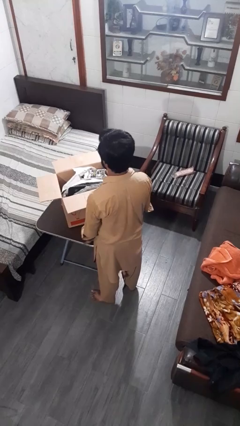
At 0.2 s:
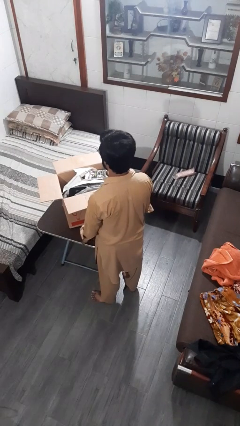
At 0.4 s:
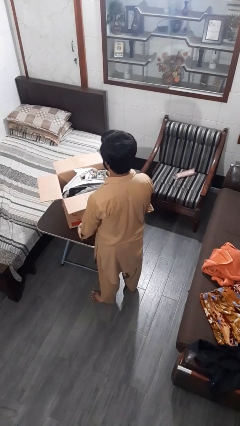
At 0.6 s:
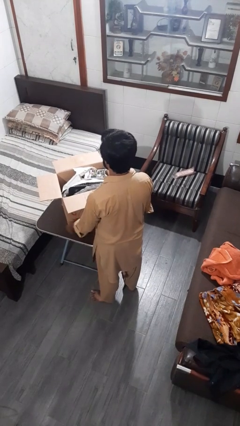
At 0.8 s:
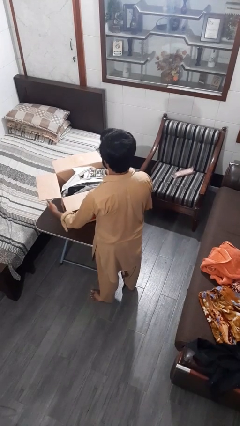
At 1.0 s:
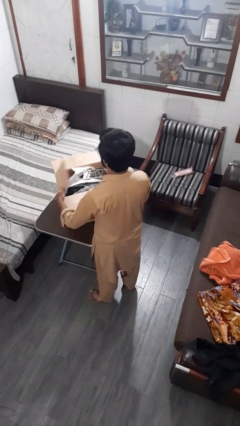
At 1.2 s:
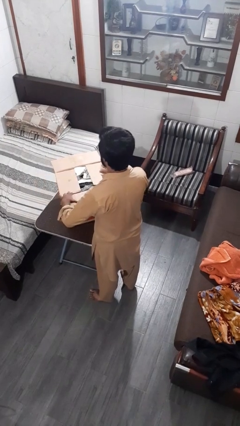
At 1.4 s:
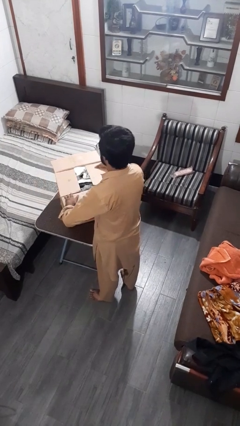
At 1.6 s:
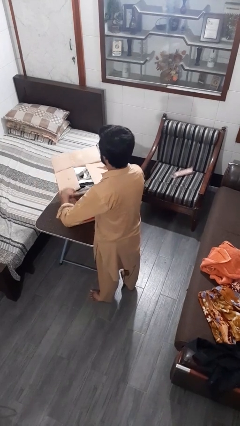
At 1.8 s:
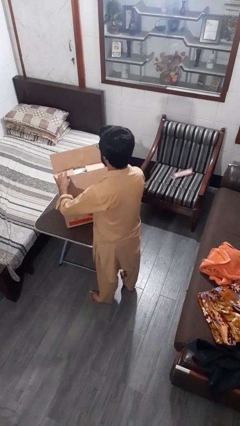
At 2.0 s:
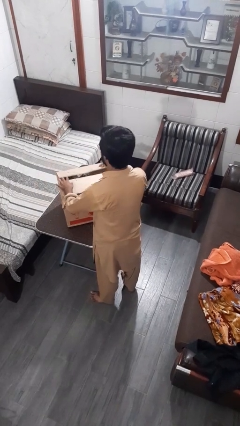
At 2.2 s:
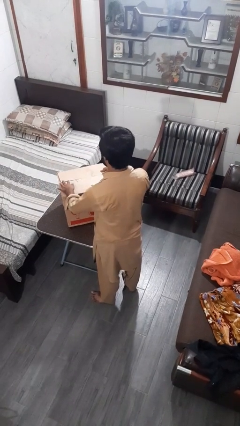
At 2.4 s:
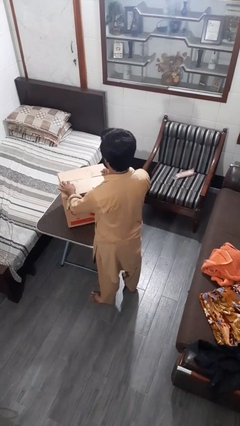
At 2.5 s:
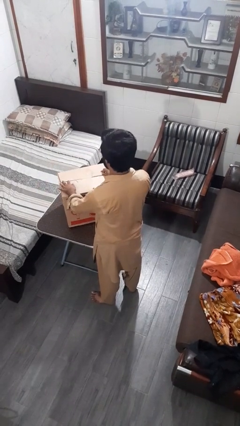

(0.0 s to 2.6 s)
person closes box

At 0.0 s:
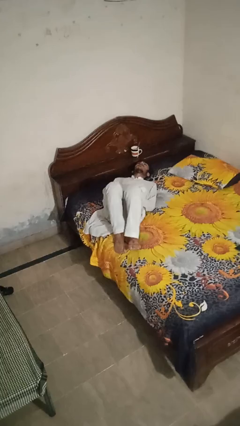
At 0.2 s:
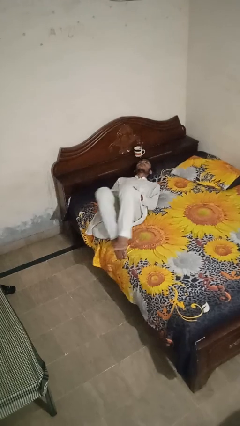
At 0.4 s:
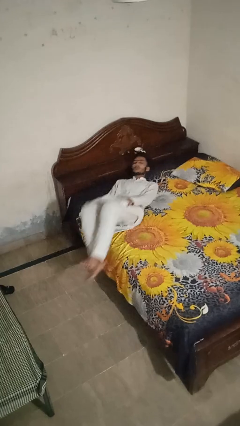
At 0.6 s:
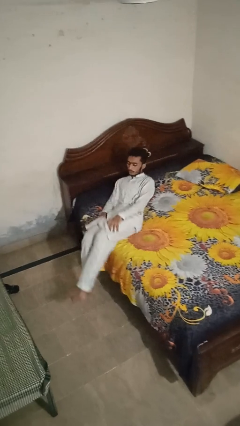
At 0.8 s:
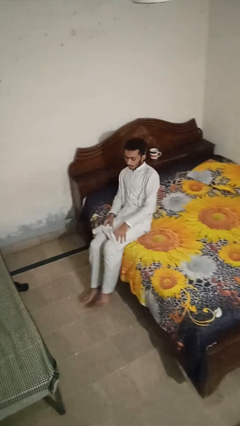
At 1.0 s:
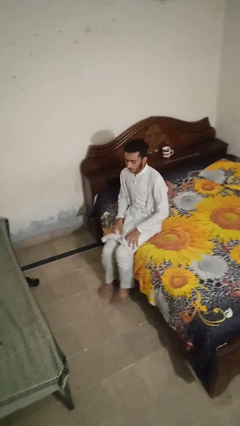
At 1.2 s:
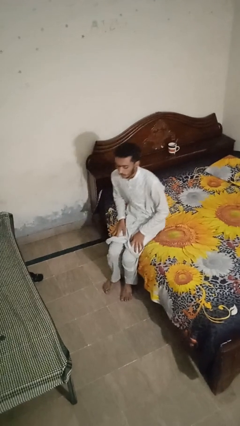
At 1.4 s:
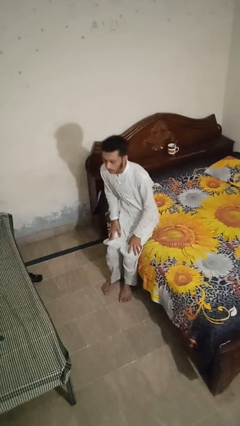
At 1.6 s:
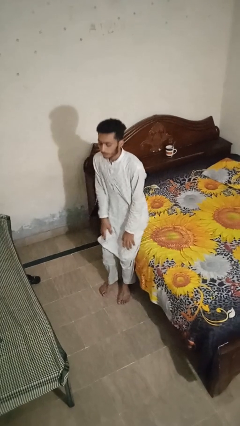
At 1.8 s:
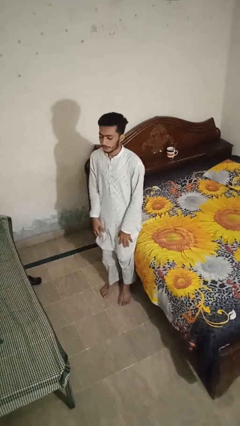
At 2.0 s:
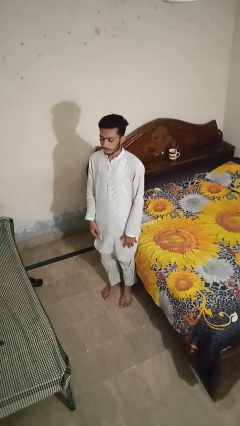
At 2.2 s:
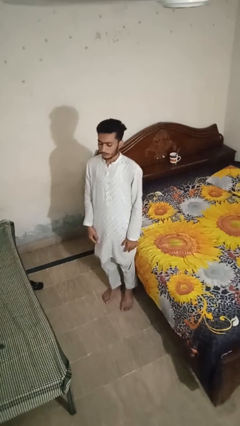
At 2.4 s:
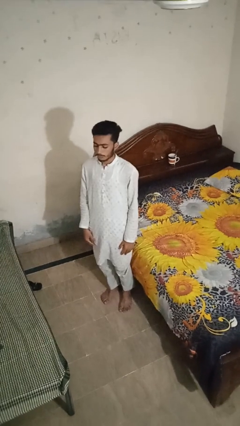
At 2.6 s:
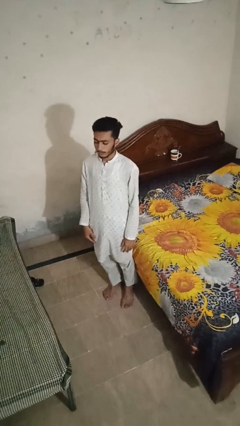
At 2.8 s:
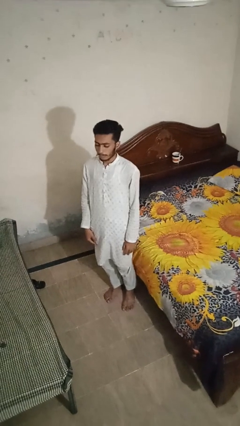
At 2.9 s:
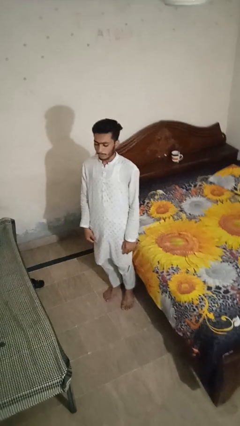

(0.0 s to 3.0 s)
person stands up

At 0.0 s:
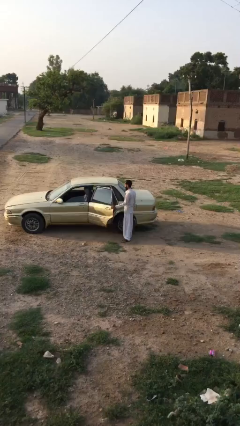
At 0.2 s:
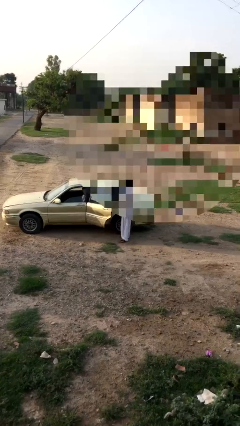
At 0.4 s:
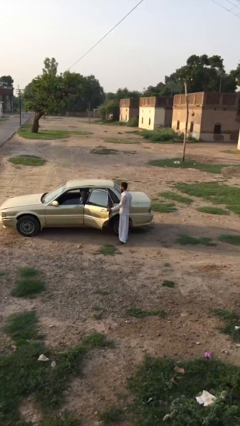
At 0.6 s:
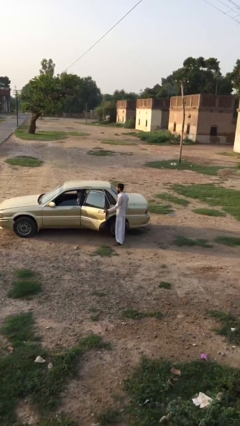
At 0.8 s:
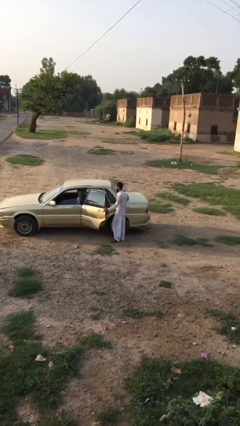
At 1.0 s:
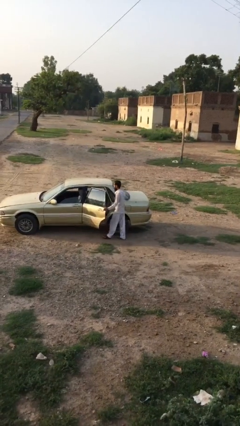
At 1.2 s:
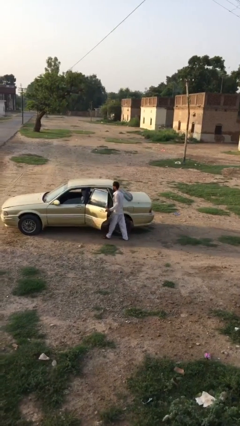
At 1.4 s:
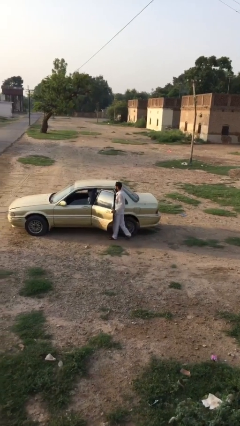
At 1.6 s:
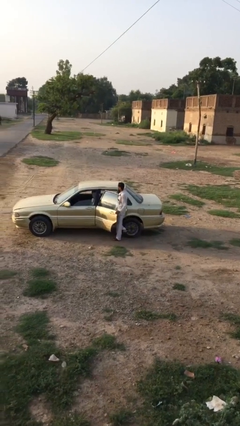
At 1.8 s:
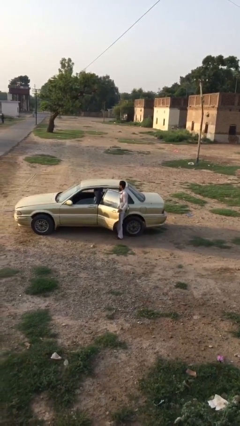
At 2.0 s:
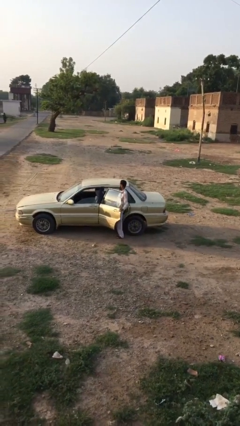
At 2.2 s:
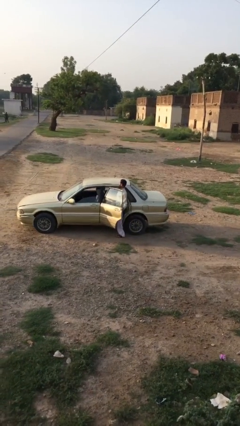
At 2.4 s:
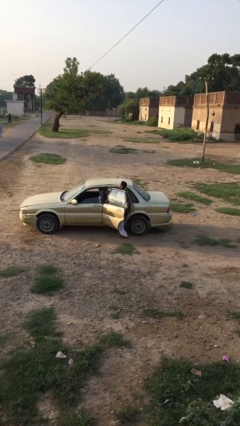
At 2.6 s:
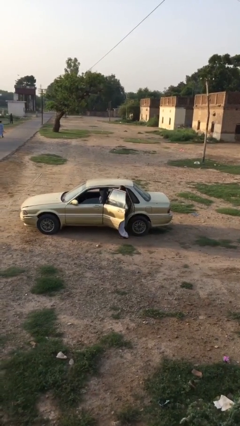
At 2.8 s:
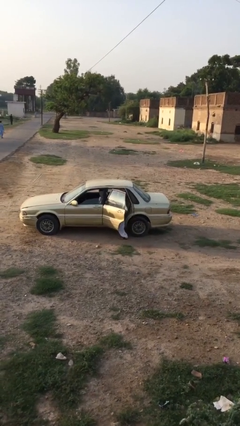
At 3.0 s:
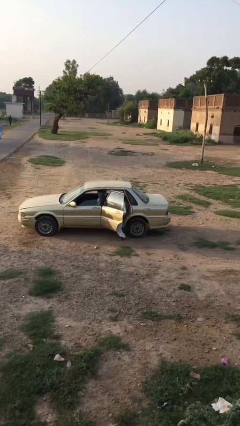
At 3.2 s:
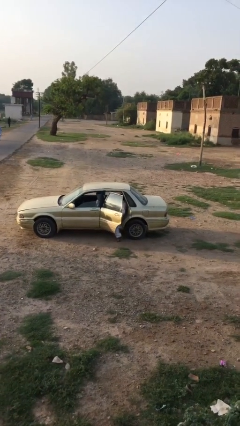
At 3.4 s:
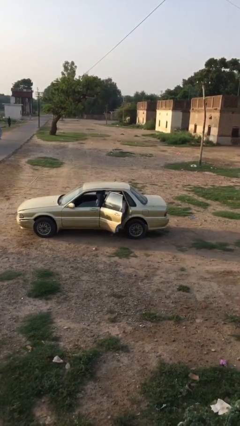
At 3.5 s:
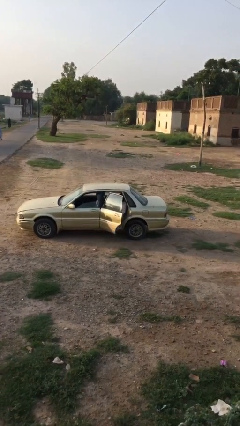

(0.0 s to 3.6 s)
person enters car

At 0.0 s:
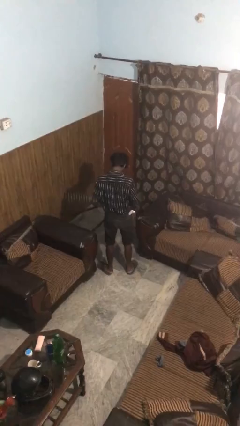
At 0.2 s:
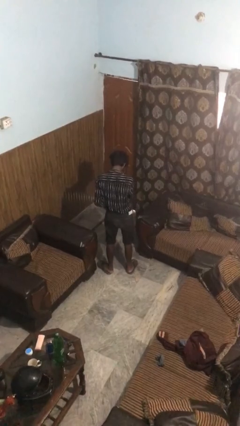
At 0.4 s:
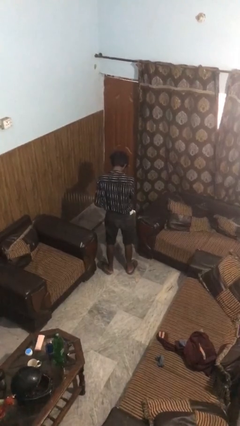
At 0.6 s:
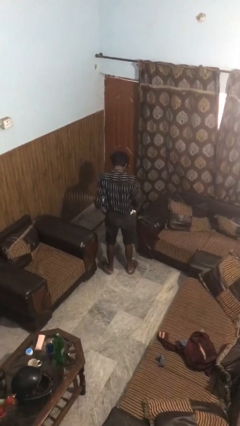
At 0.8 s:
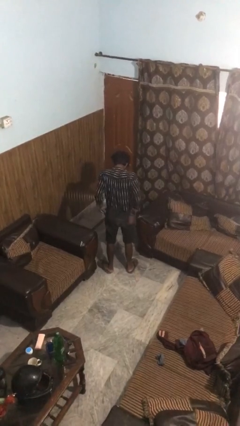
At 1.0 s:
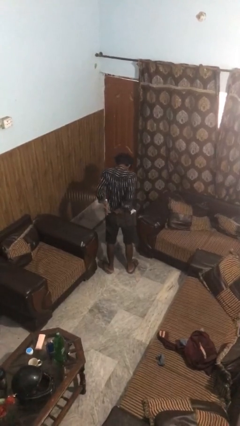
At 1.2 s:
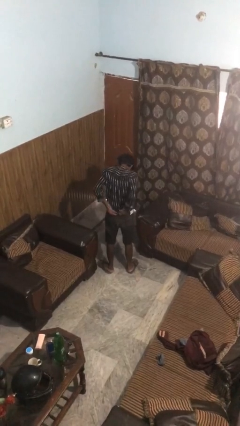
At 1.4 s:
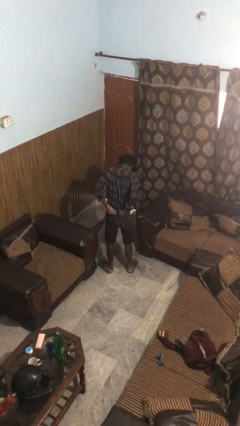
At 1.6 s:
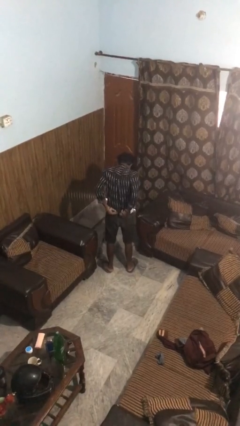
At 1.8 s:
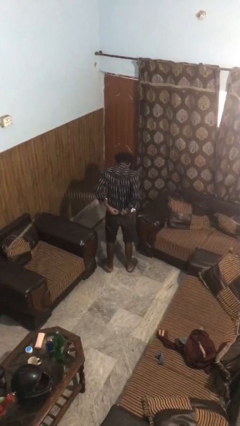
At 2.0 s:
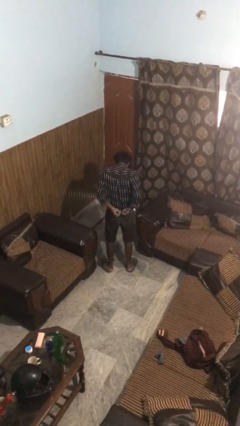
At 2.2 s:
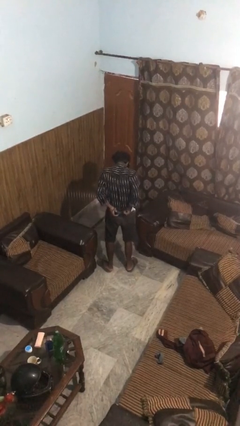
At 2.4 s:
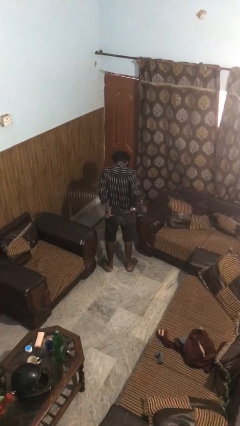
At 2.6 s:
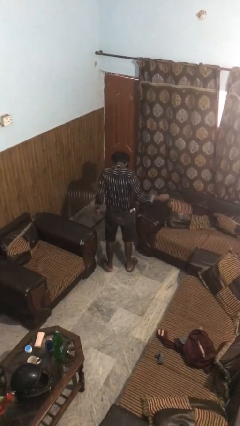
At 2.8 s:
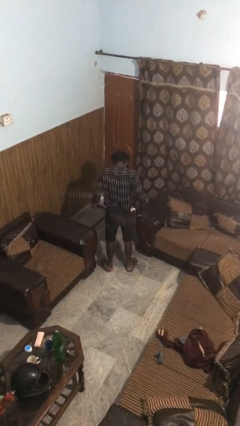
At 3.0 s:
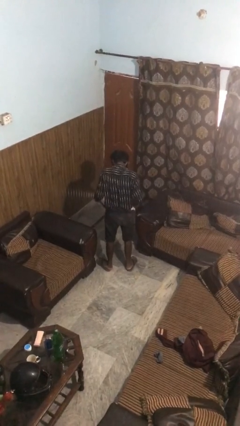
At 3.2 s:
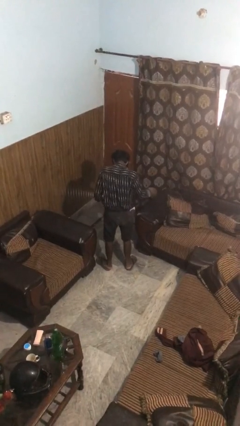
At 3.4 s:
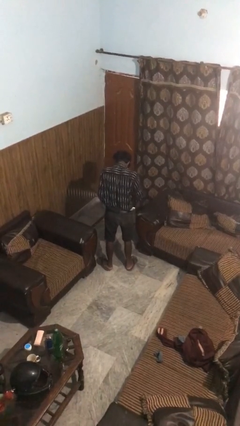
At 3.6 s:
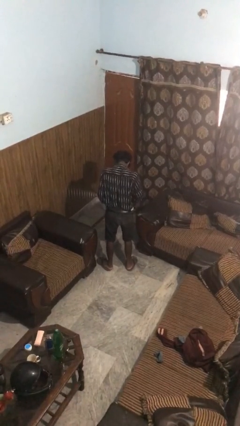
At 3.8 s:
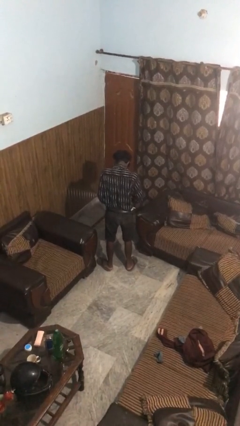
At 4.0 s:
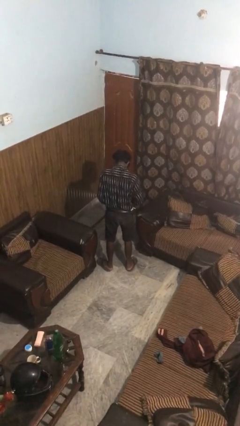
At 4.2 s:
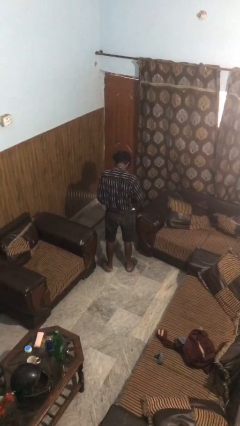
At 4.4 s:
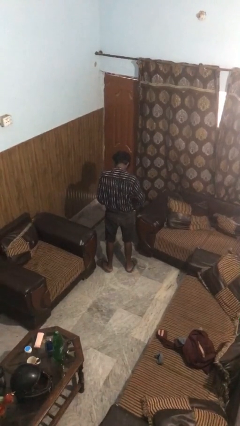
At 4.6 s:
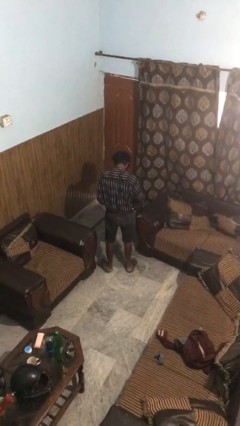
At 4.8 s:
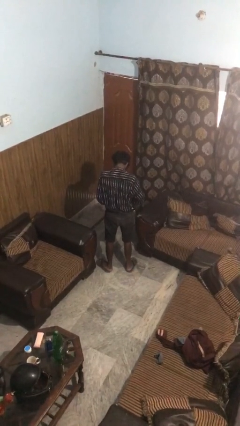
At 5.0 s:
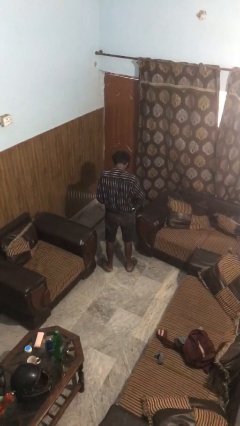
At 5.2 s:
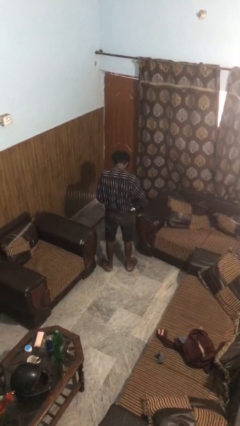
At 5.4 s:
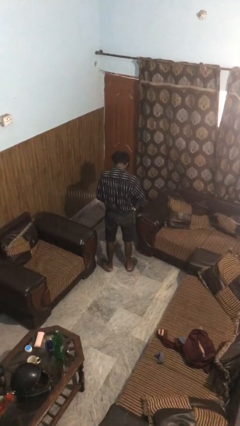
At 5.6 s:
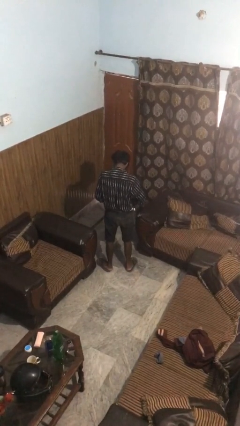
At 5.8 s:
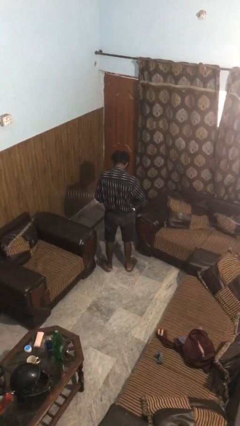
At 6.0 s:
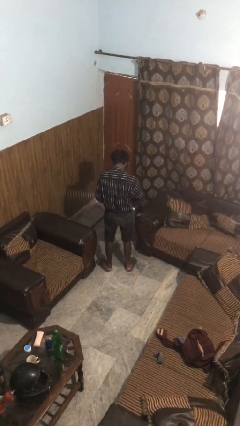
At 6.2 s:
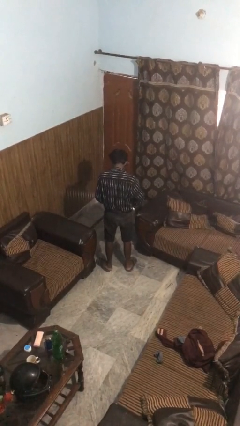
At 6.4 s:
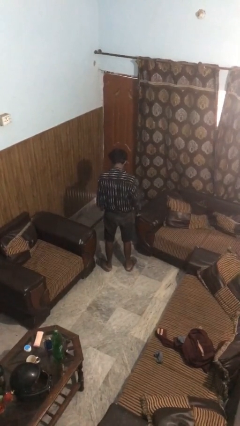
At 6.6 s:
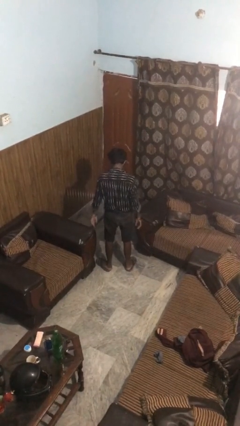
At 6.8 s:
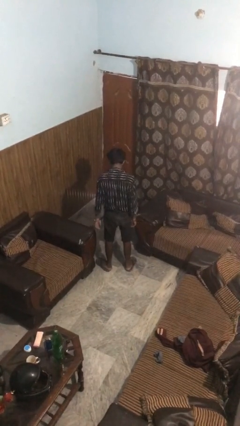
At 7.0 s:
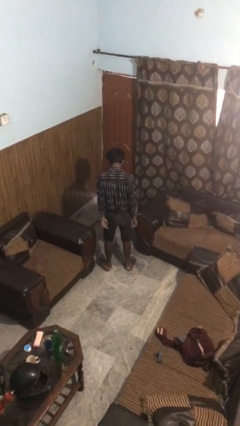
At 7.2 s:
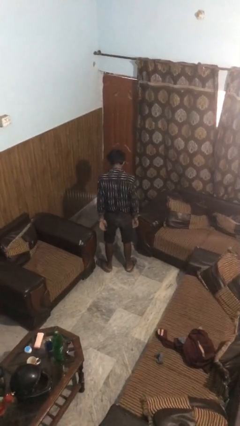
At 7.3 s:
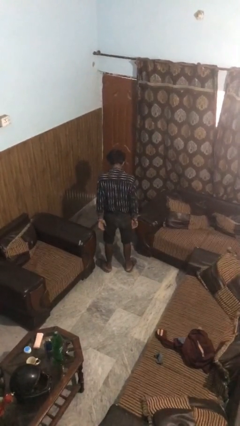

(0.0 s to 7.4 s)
person puts on belt

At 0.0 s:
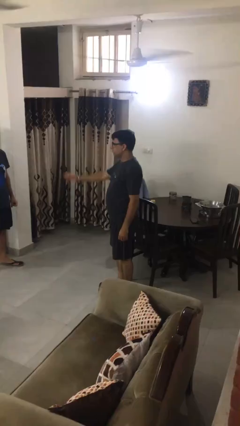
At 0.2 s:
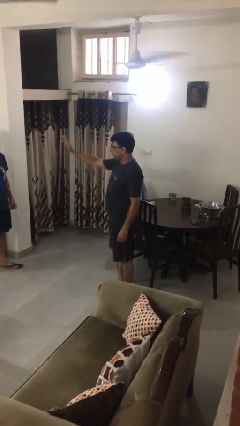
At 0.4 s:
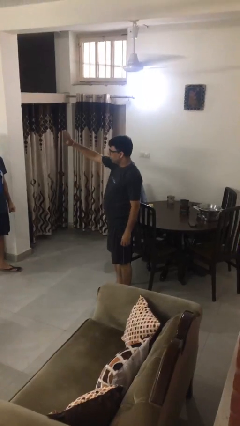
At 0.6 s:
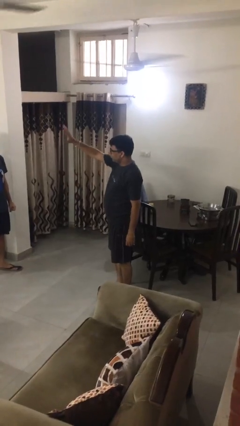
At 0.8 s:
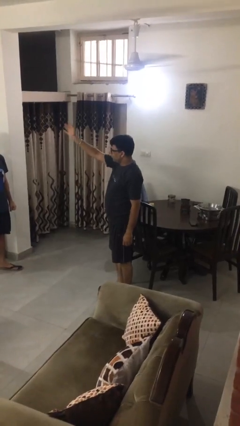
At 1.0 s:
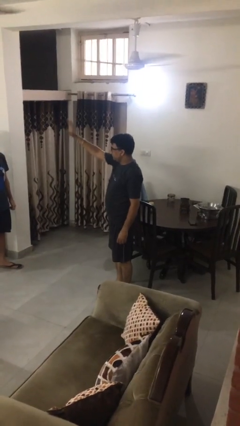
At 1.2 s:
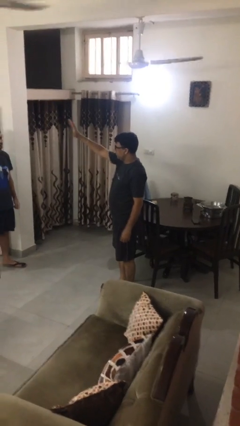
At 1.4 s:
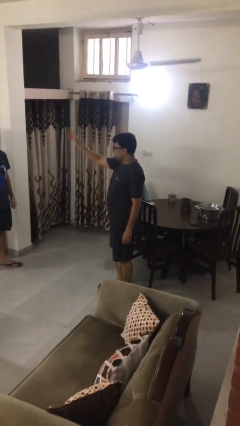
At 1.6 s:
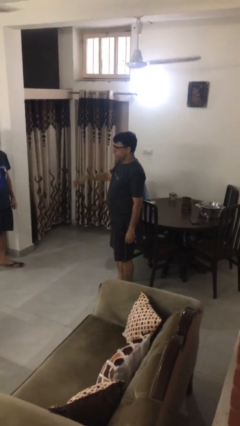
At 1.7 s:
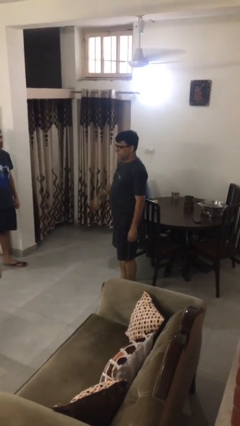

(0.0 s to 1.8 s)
person waves at person
